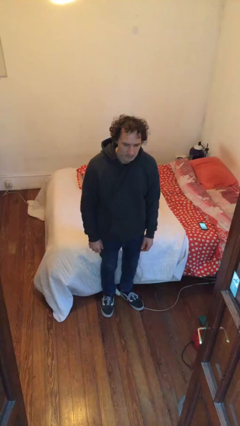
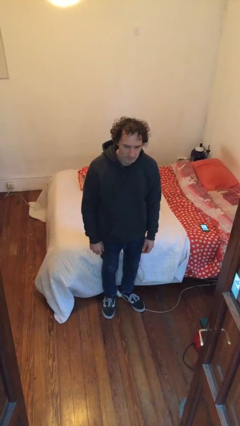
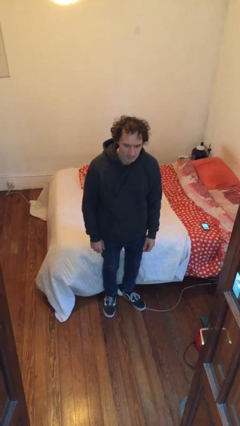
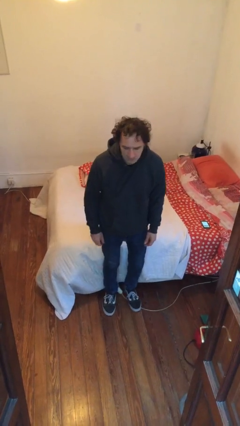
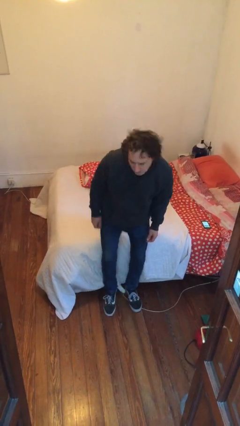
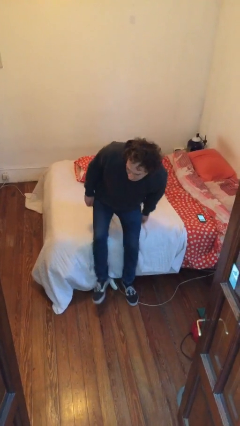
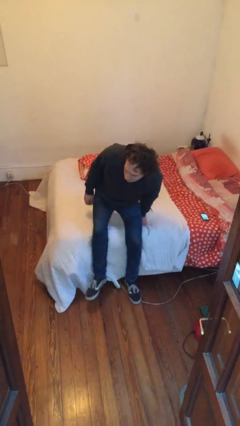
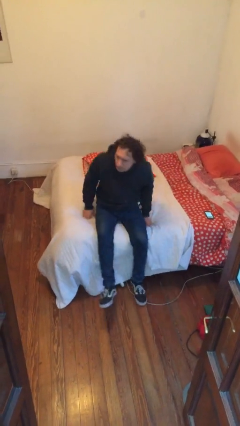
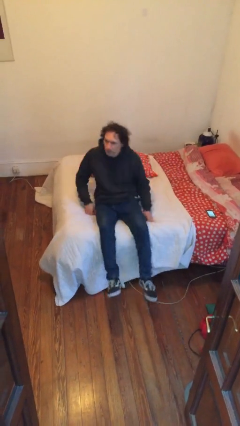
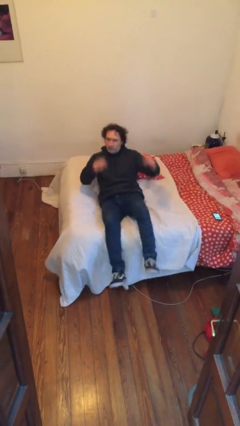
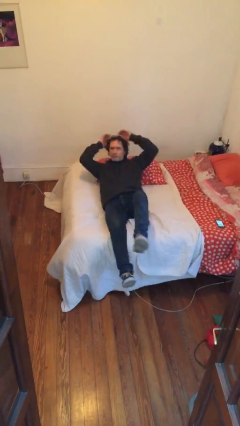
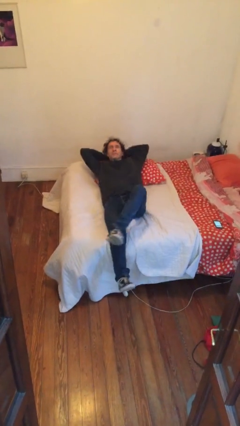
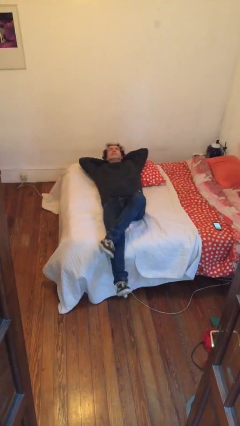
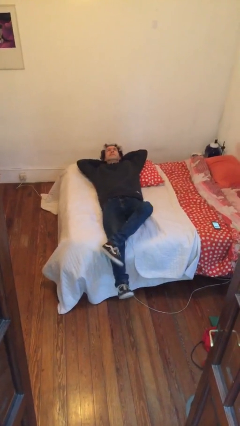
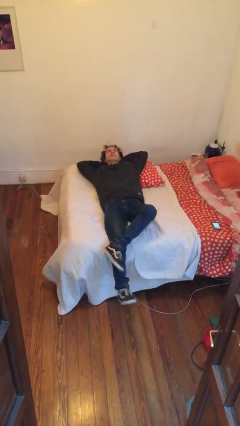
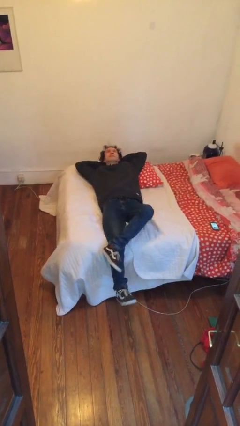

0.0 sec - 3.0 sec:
person lies down on bed

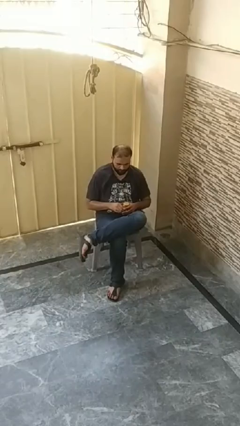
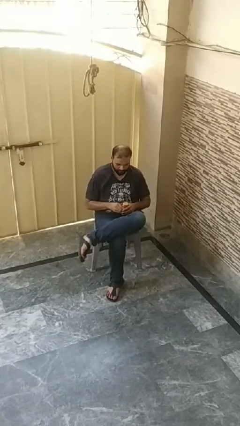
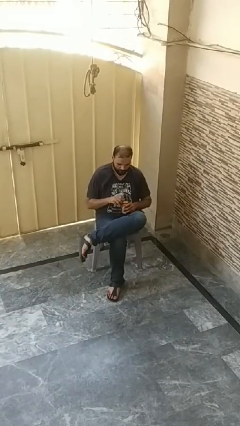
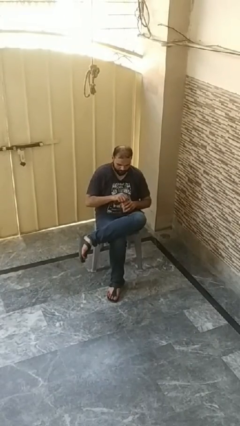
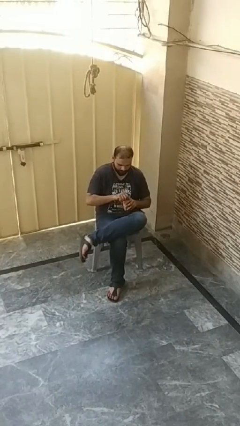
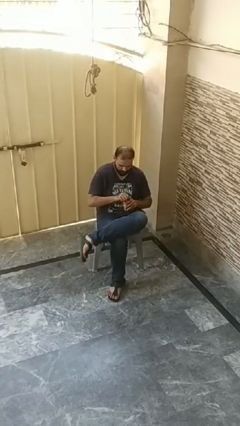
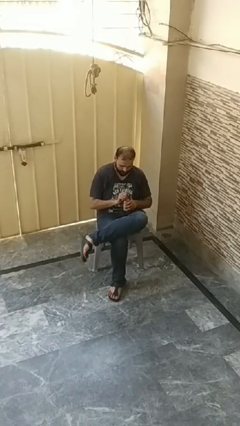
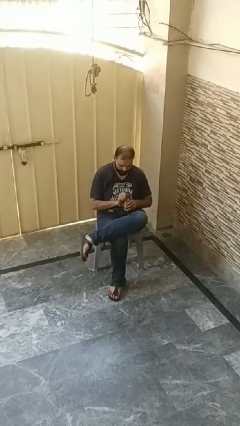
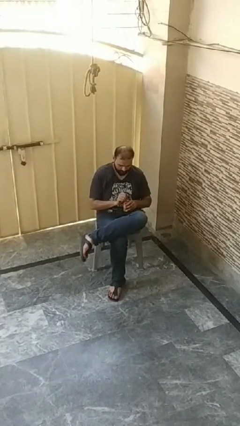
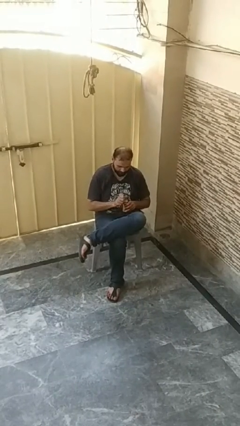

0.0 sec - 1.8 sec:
person opens beverage can

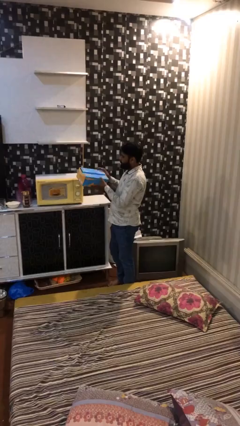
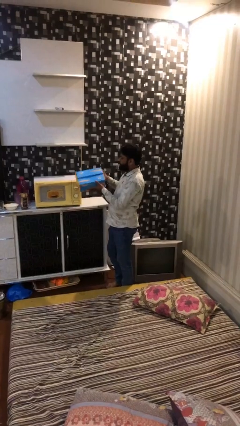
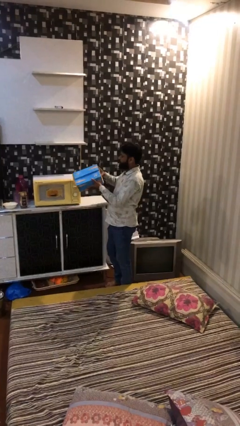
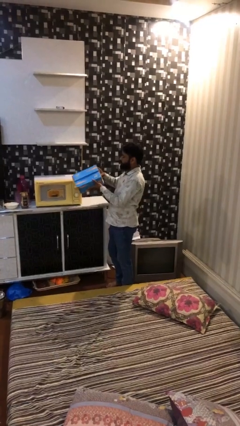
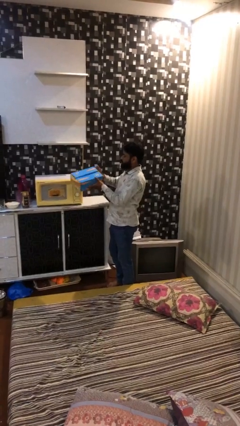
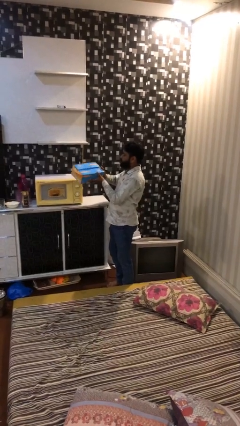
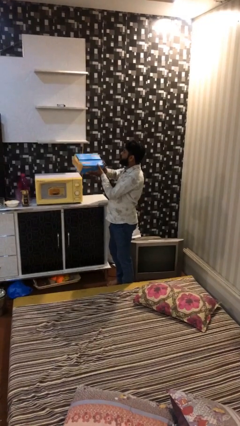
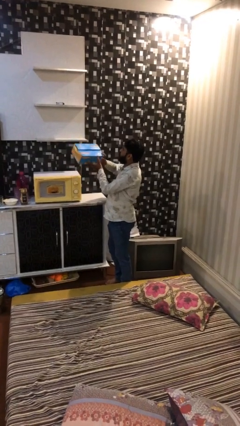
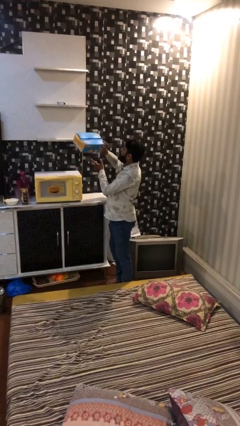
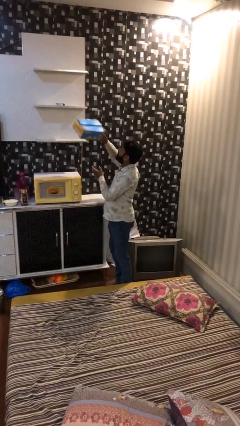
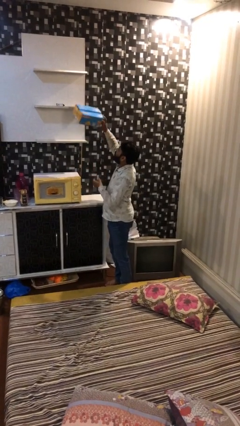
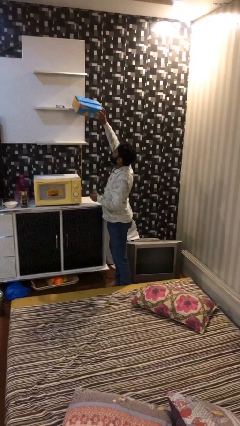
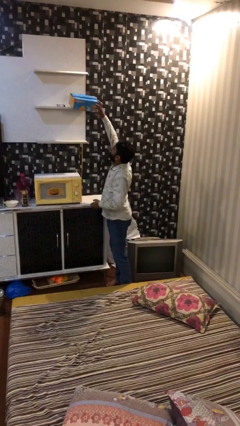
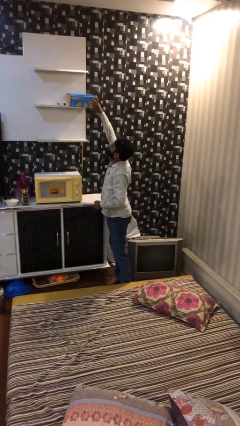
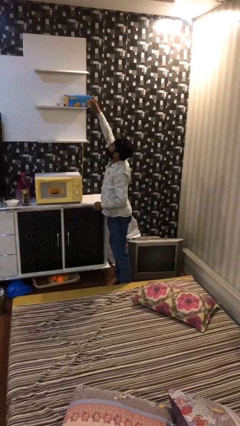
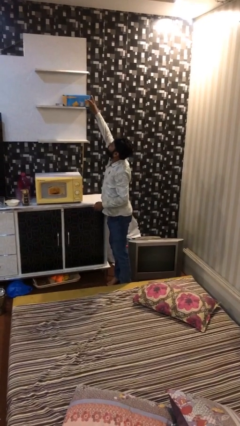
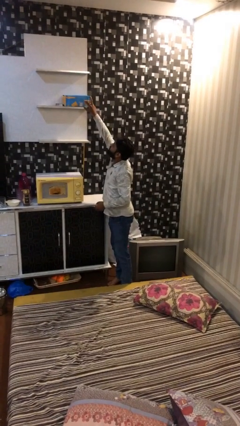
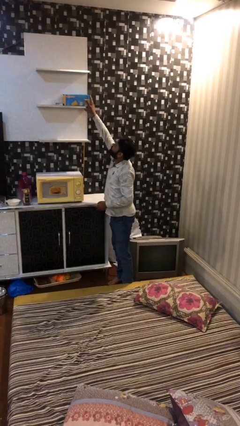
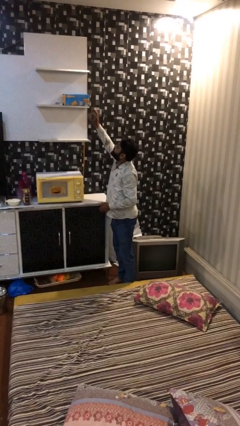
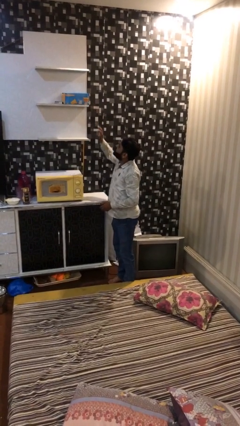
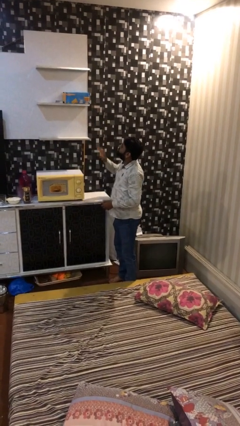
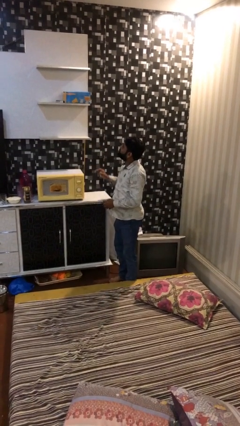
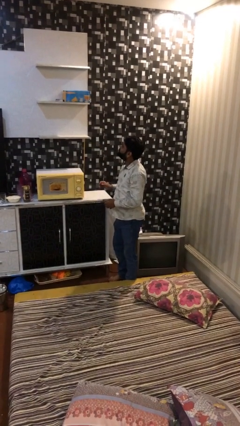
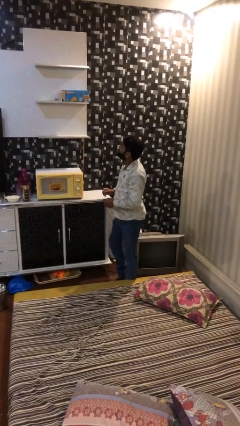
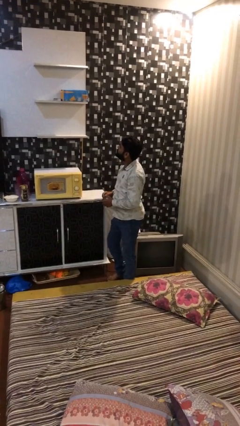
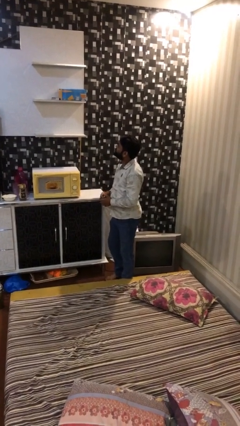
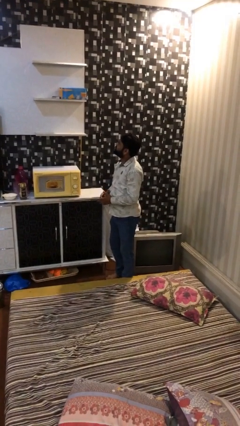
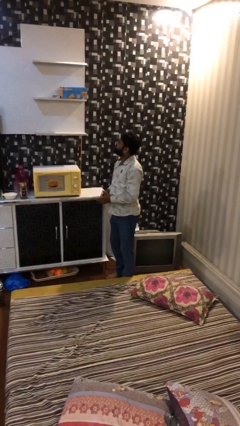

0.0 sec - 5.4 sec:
person puts down object on shelf

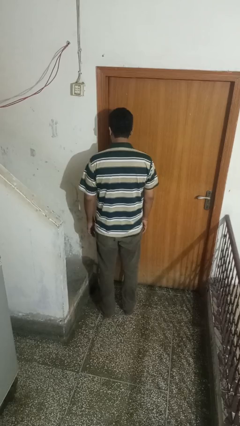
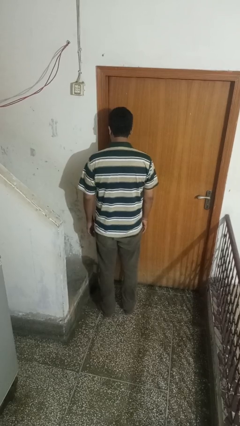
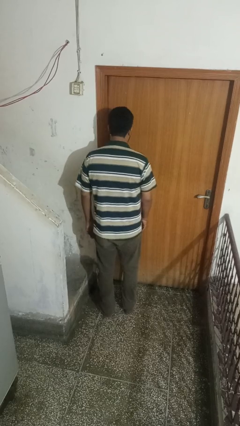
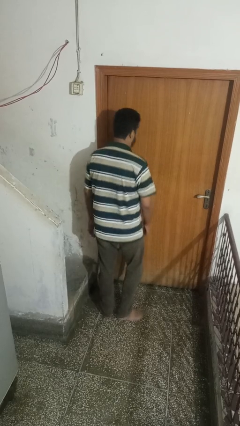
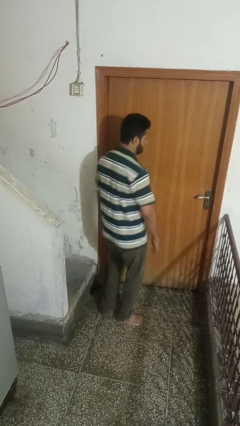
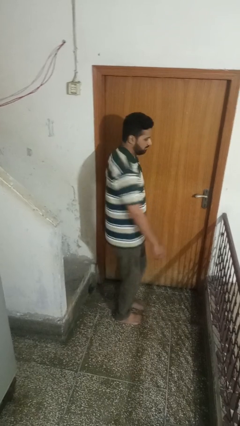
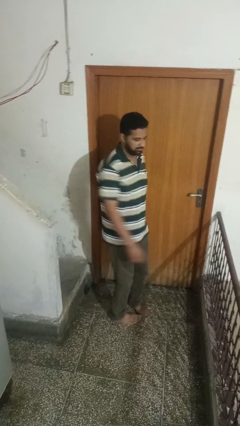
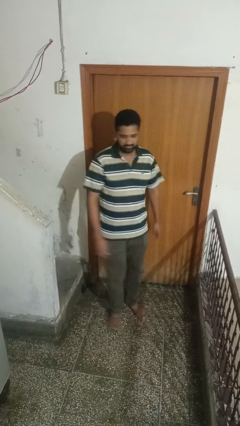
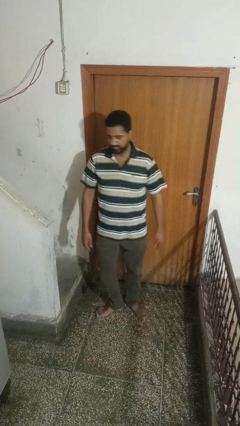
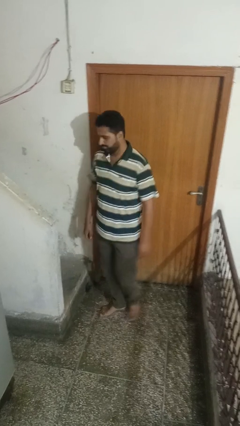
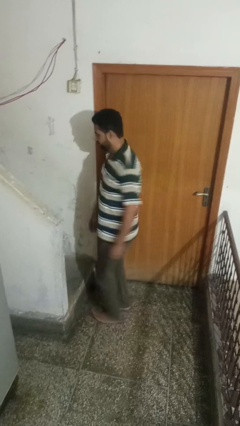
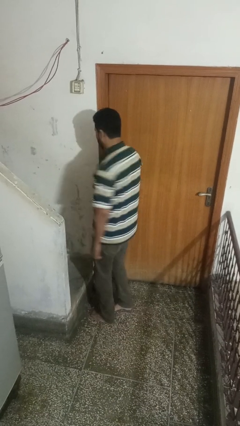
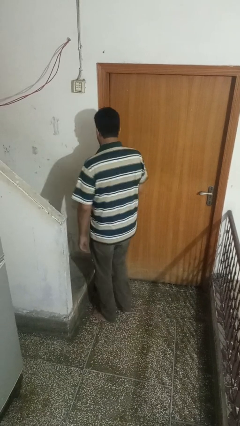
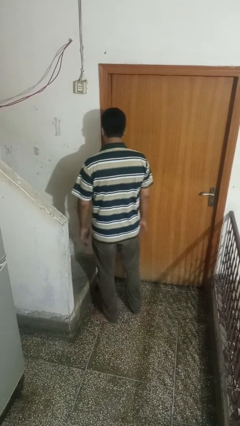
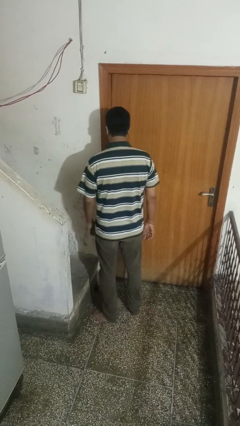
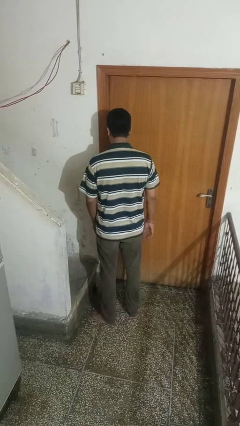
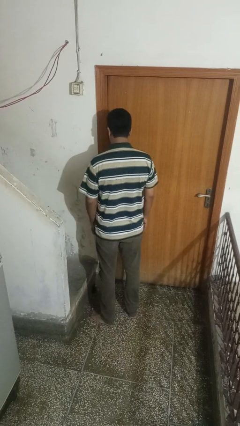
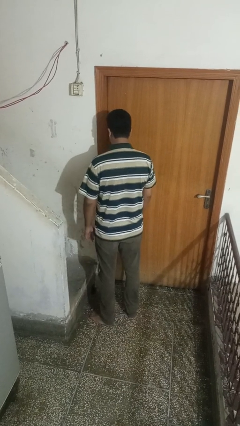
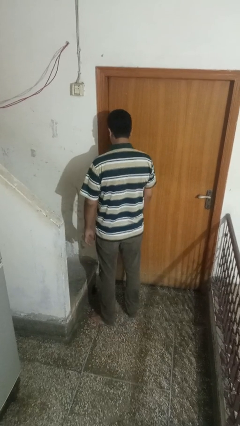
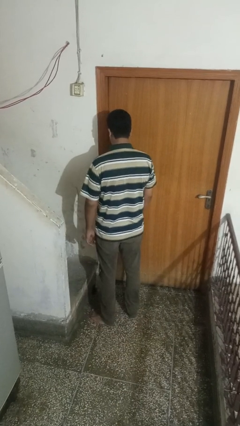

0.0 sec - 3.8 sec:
person twirls

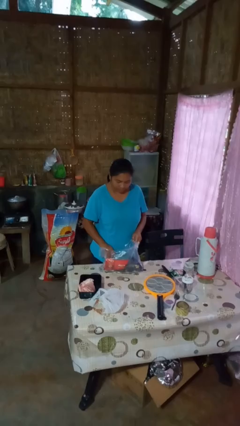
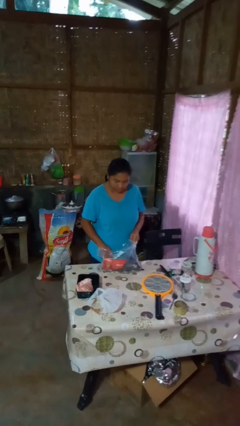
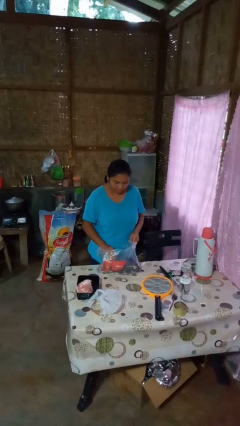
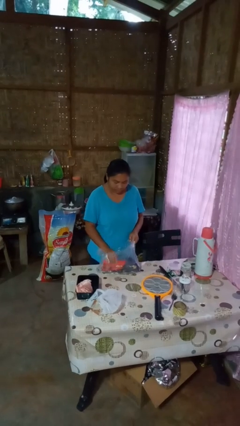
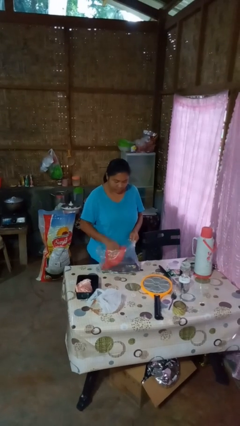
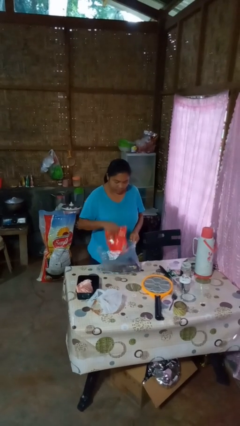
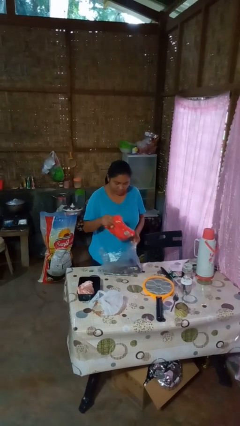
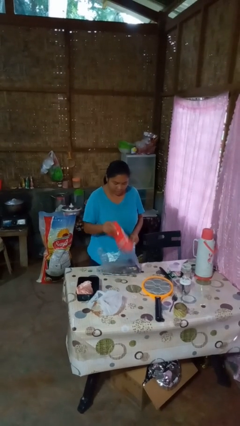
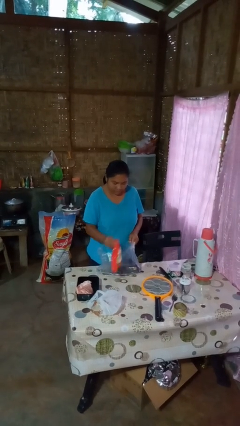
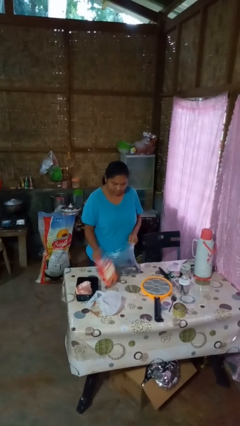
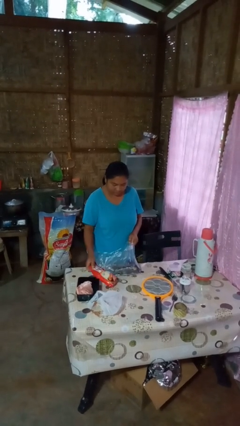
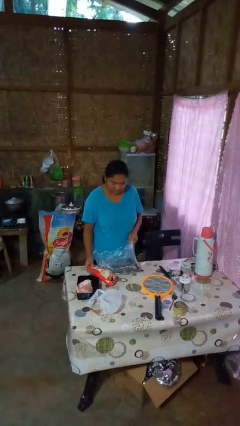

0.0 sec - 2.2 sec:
person takes object from bag

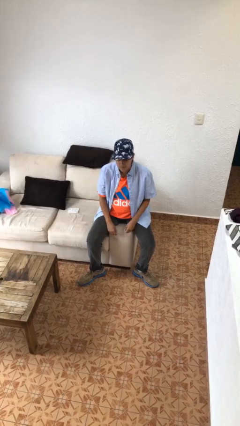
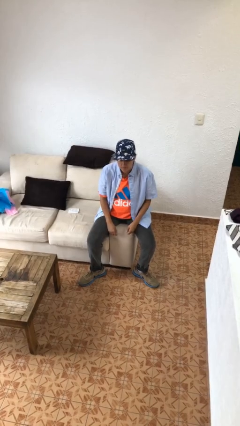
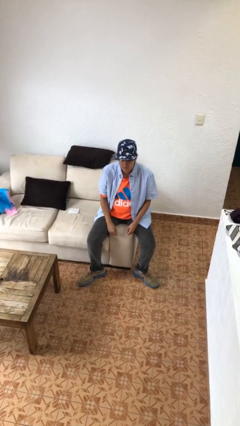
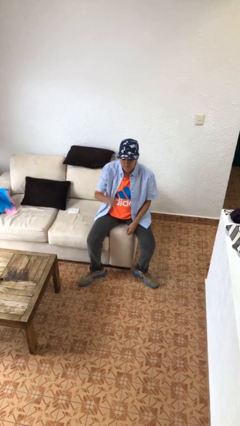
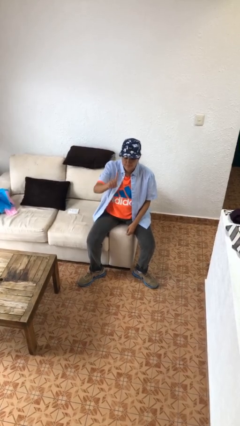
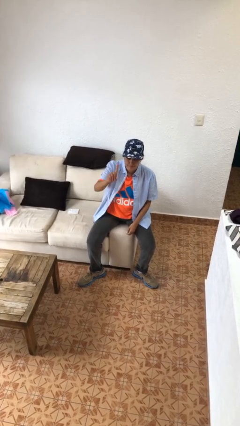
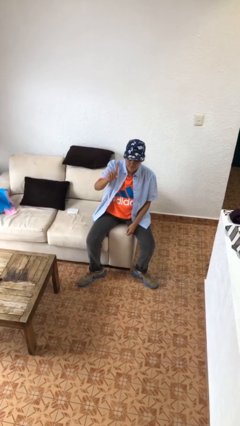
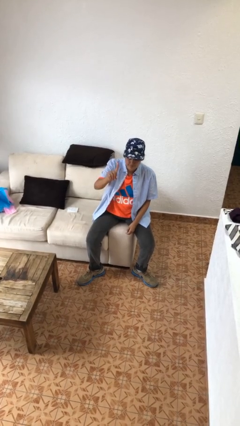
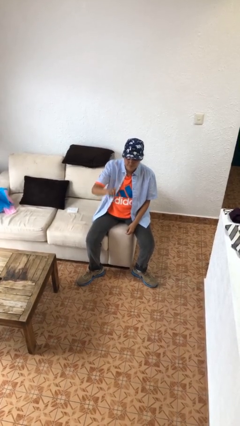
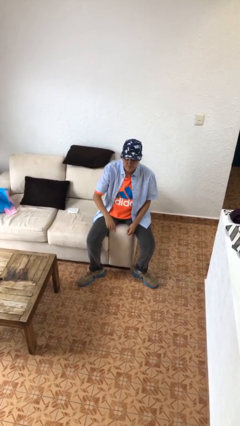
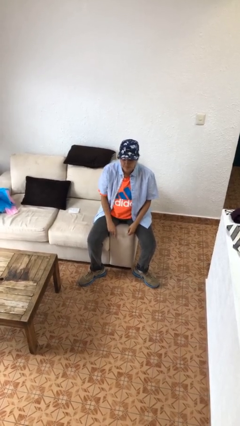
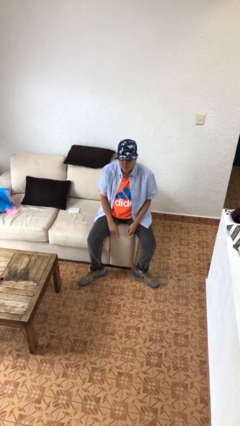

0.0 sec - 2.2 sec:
person gestures number one
